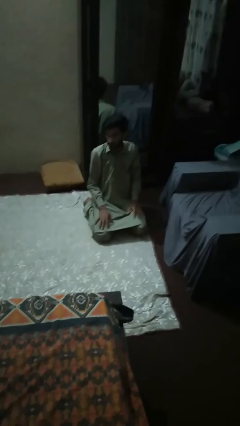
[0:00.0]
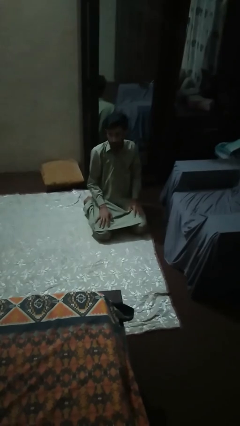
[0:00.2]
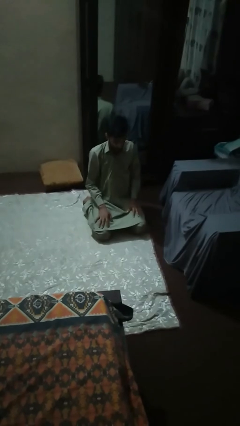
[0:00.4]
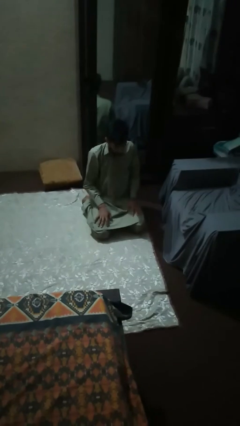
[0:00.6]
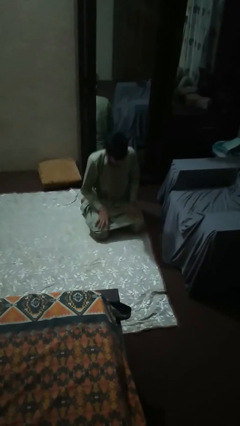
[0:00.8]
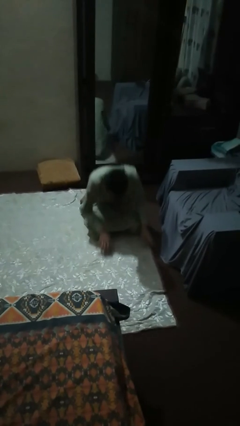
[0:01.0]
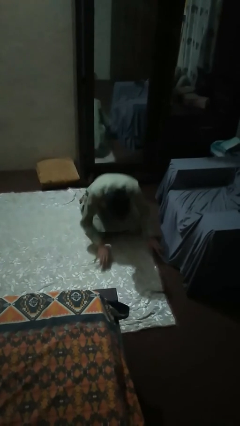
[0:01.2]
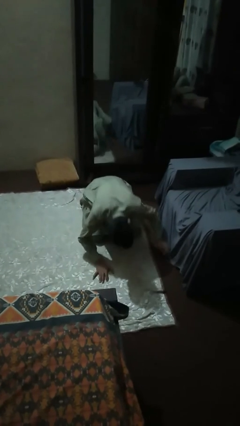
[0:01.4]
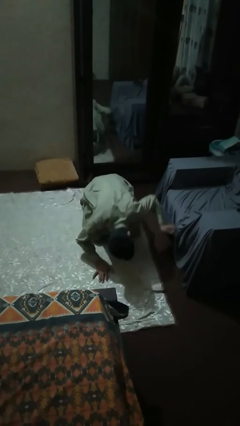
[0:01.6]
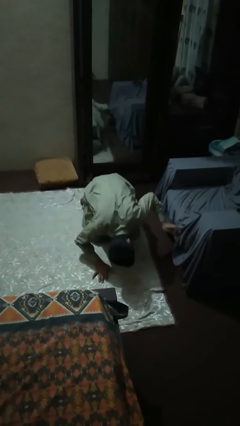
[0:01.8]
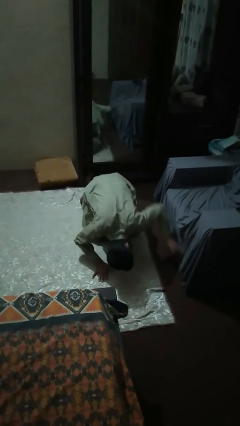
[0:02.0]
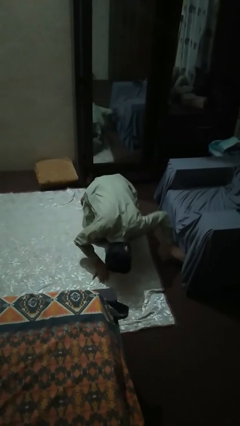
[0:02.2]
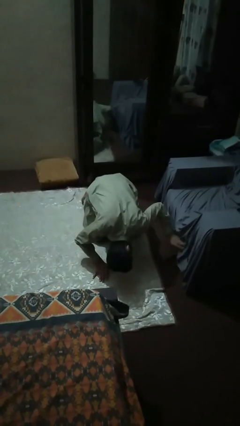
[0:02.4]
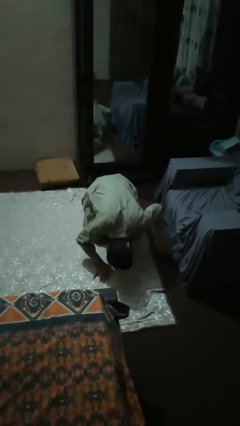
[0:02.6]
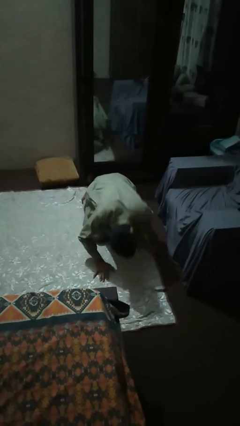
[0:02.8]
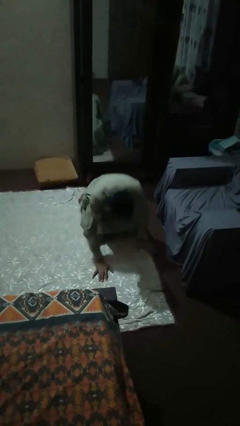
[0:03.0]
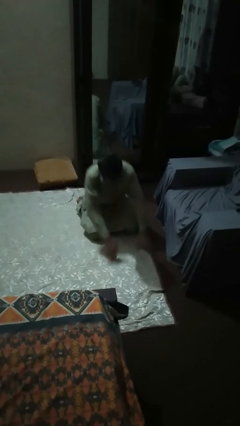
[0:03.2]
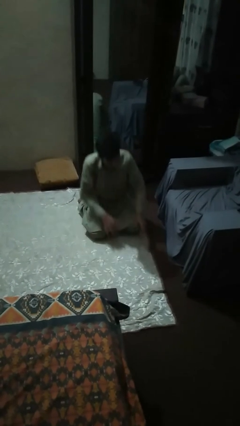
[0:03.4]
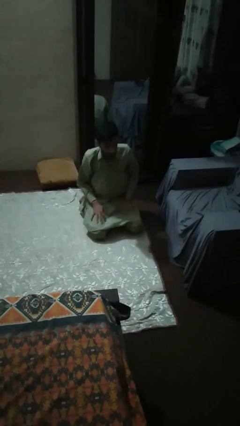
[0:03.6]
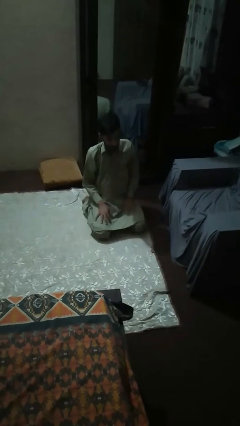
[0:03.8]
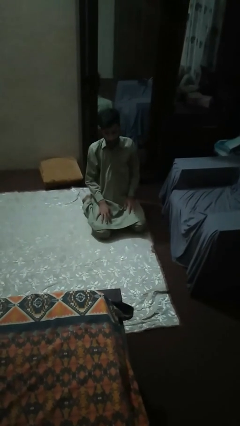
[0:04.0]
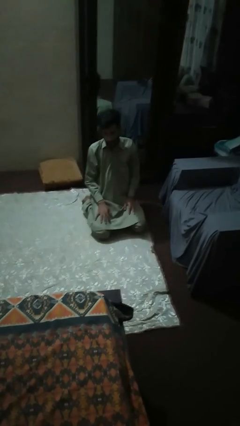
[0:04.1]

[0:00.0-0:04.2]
person searches under couch

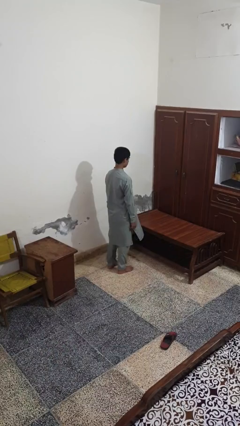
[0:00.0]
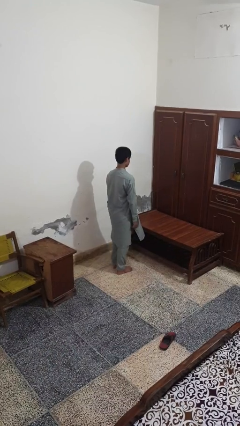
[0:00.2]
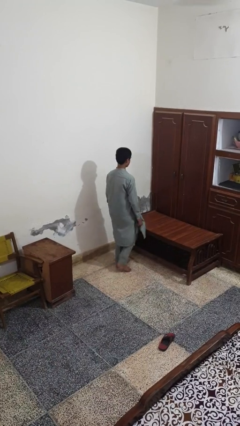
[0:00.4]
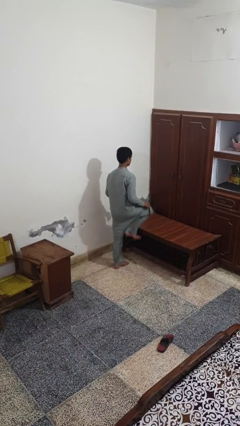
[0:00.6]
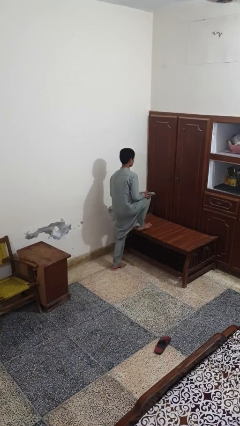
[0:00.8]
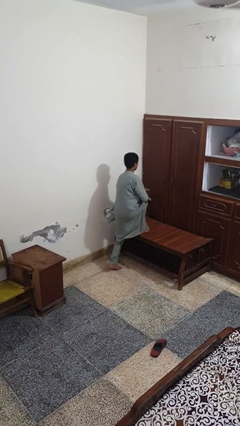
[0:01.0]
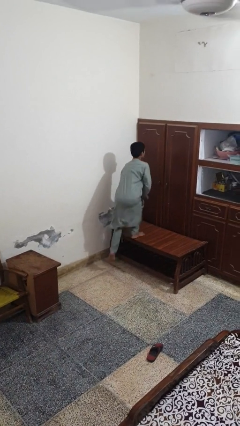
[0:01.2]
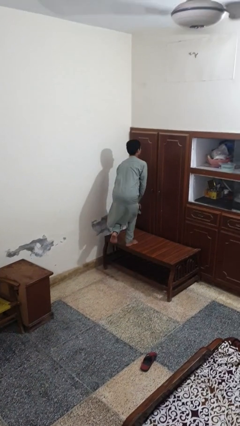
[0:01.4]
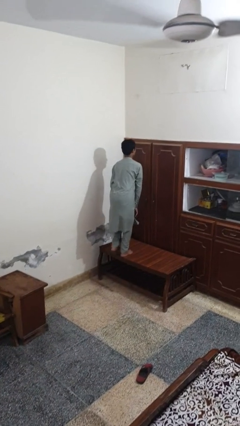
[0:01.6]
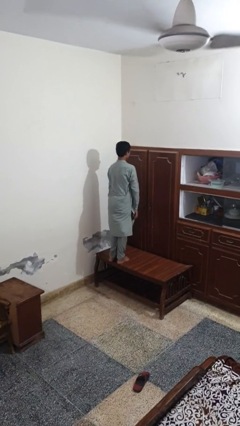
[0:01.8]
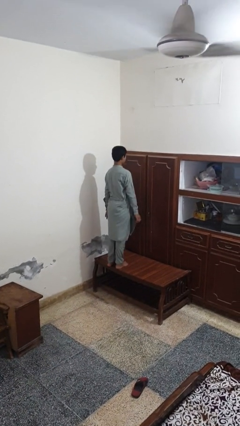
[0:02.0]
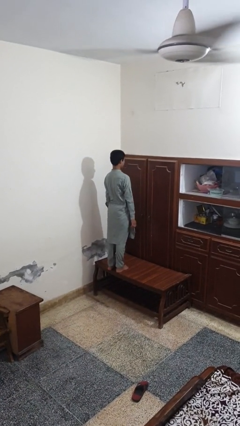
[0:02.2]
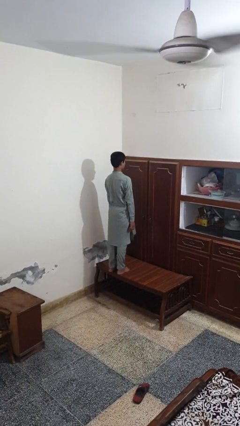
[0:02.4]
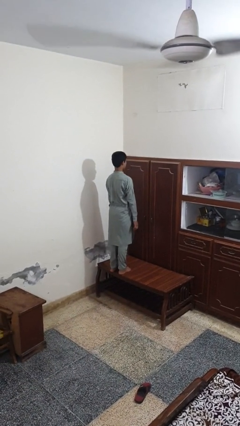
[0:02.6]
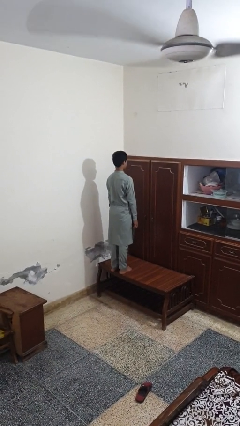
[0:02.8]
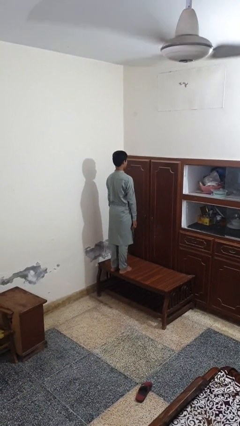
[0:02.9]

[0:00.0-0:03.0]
person climbs on table

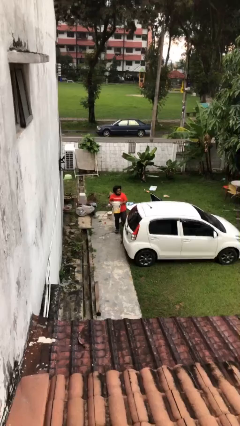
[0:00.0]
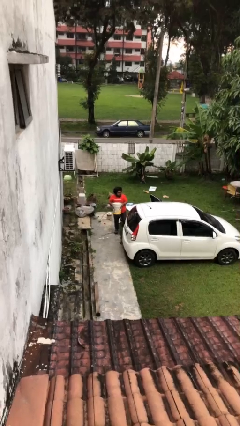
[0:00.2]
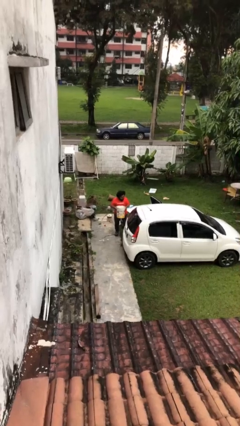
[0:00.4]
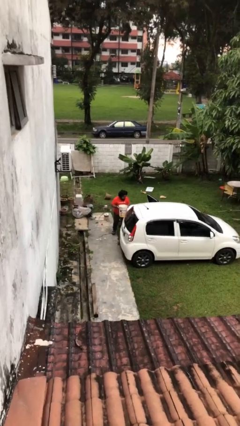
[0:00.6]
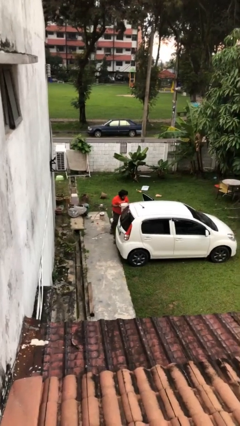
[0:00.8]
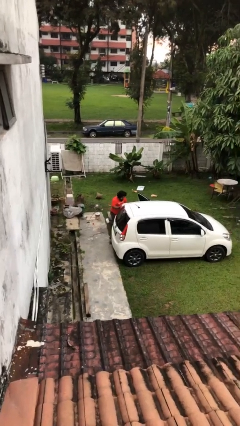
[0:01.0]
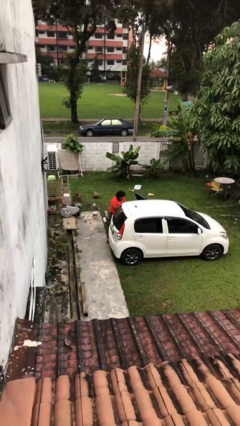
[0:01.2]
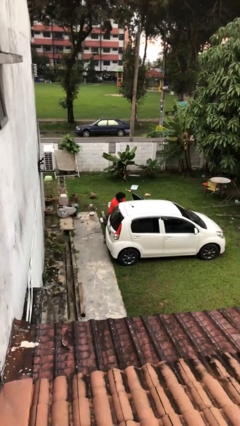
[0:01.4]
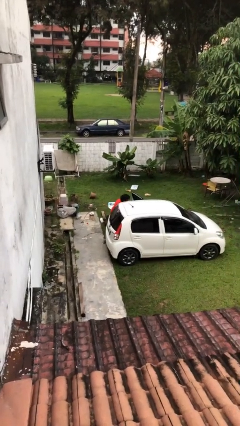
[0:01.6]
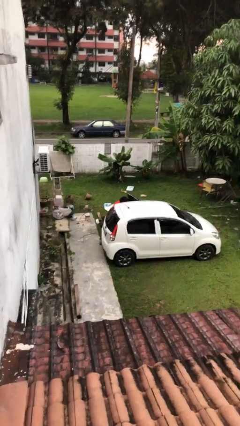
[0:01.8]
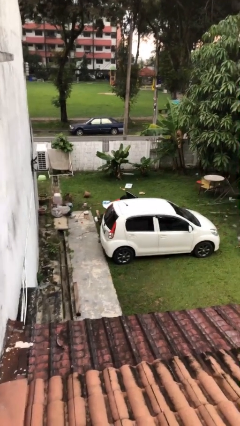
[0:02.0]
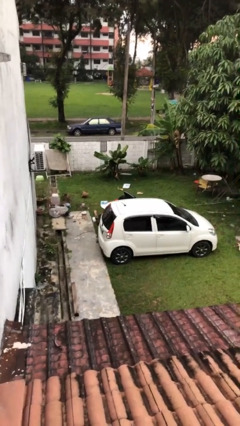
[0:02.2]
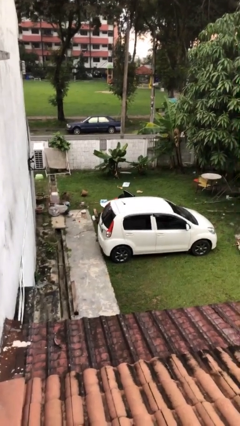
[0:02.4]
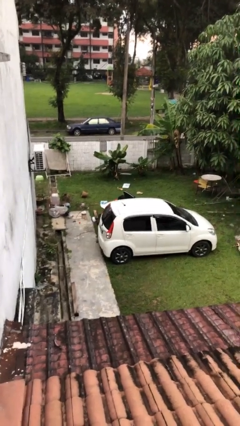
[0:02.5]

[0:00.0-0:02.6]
person loads car

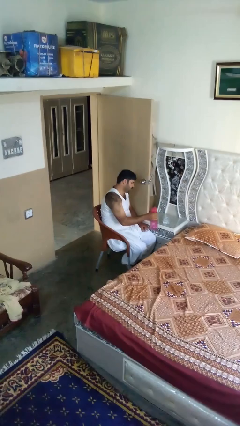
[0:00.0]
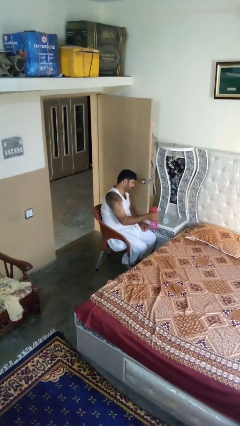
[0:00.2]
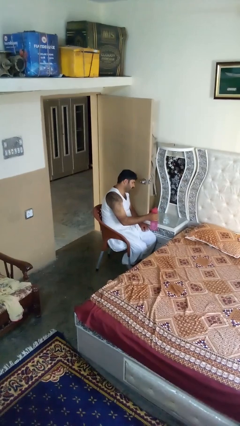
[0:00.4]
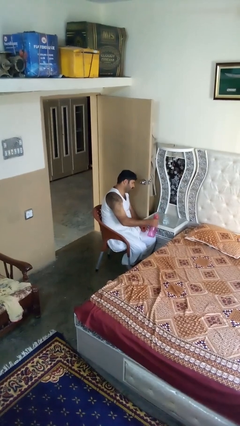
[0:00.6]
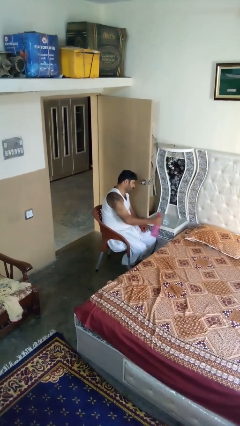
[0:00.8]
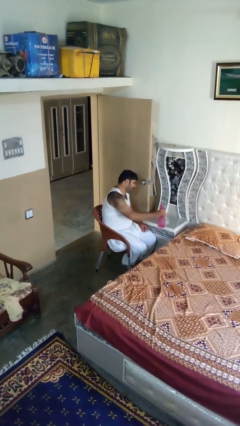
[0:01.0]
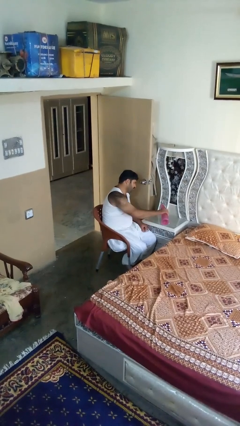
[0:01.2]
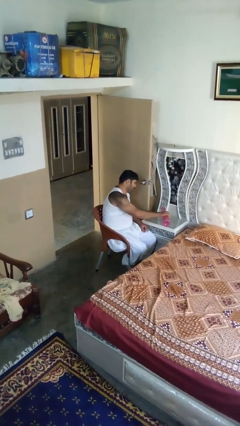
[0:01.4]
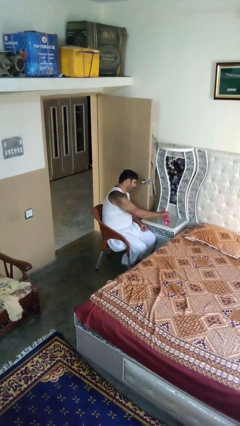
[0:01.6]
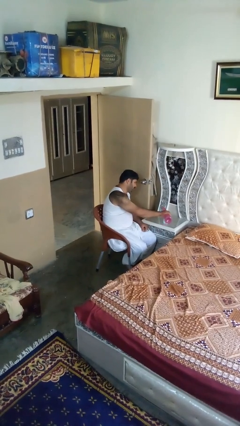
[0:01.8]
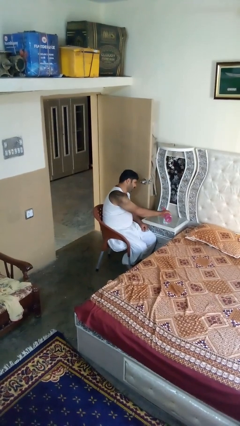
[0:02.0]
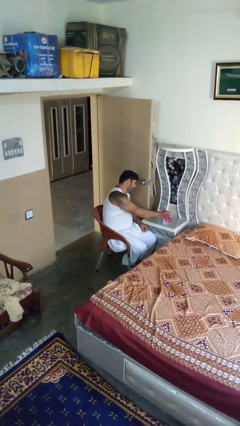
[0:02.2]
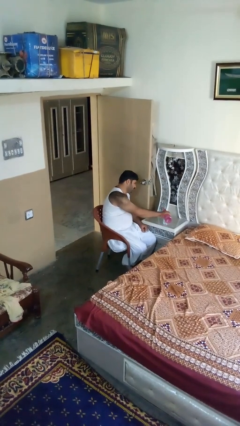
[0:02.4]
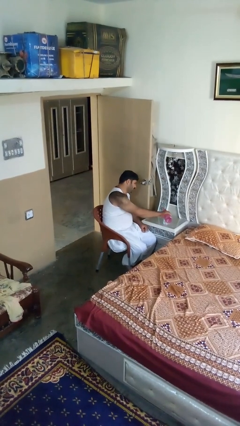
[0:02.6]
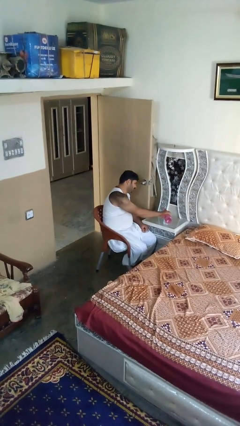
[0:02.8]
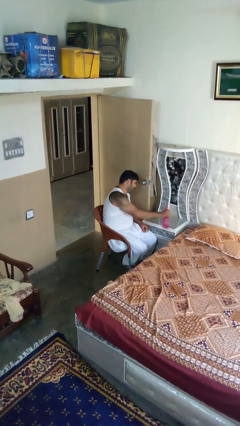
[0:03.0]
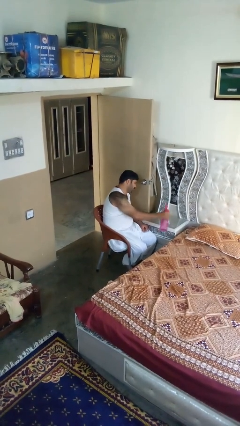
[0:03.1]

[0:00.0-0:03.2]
person pours liquid into cup

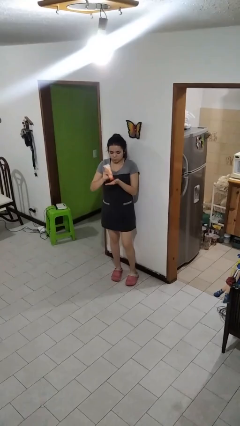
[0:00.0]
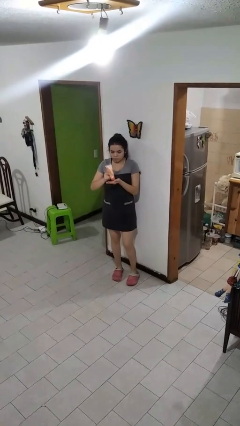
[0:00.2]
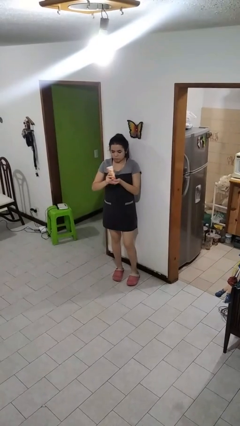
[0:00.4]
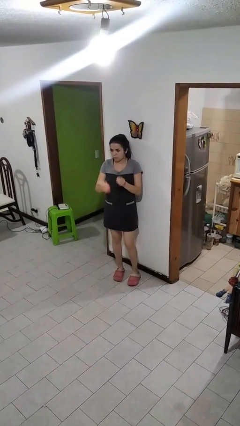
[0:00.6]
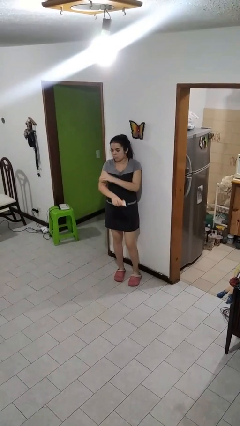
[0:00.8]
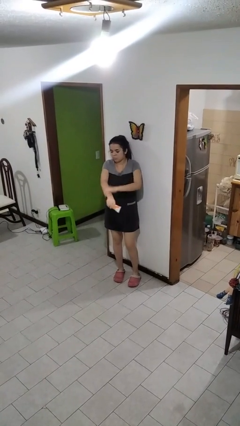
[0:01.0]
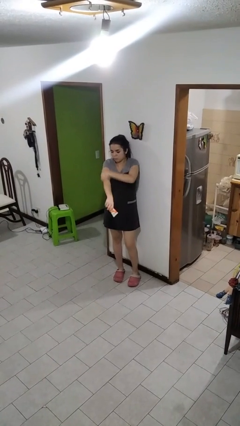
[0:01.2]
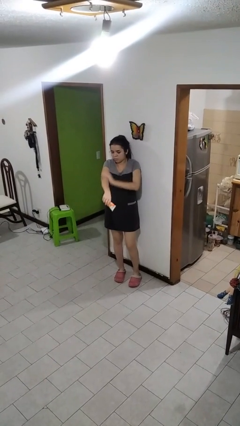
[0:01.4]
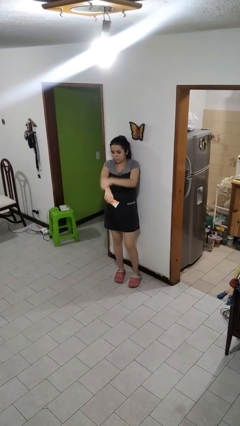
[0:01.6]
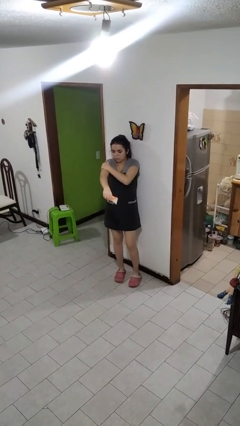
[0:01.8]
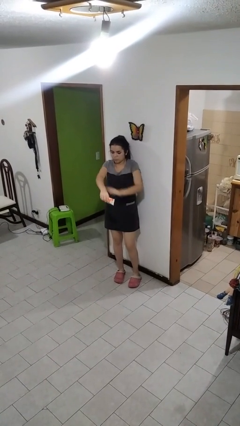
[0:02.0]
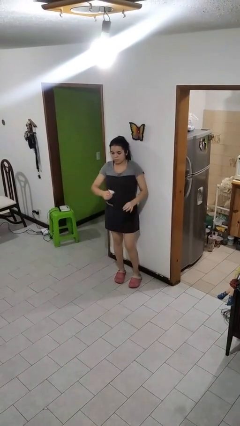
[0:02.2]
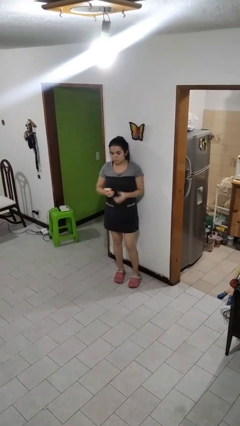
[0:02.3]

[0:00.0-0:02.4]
person applies sunscreen

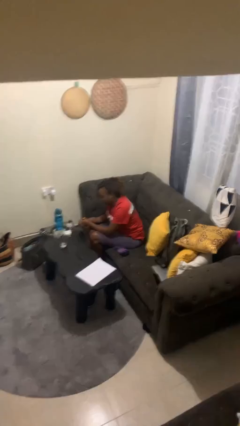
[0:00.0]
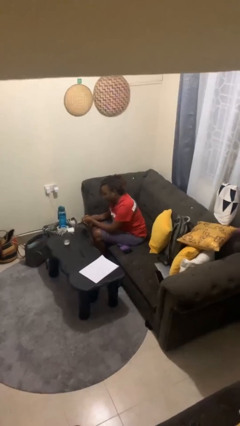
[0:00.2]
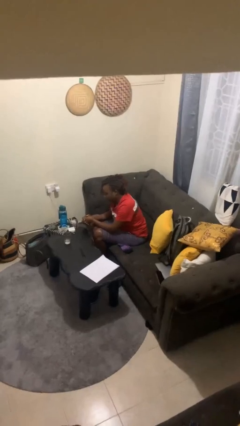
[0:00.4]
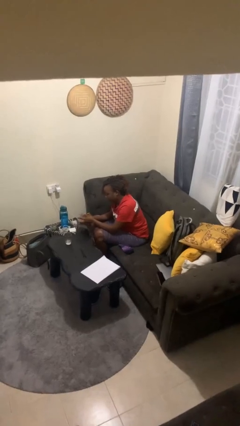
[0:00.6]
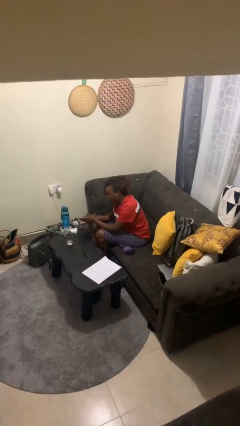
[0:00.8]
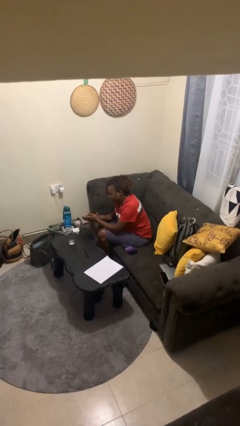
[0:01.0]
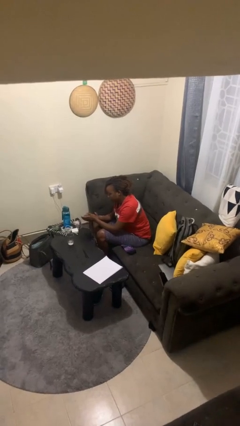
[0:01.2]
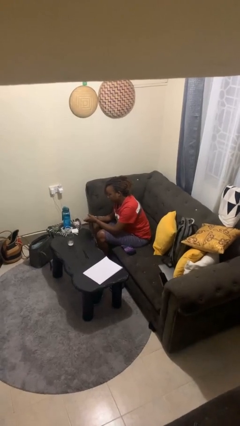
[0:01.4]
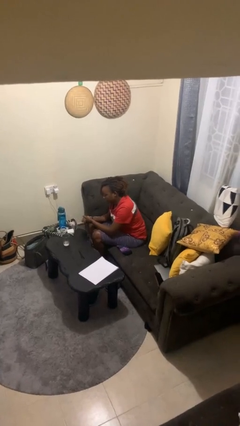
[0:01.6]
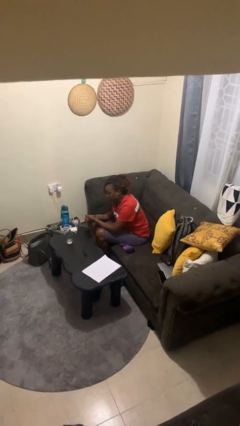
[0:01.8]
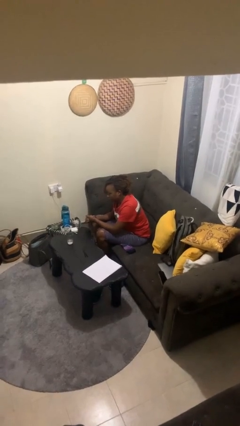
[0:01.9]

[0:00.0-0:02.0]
person claps hands
